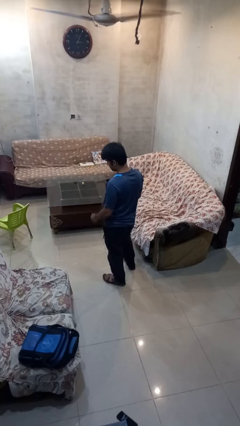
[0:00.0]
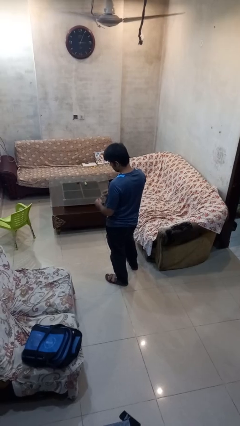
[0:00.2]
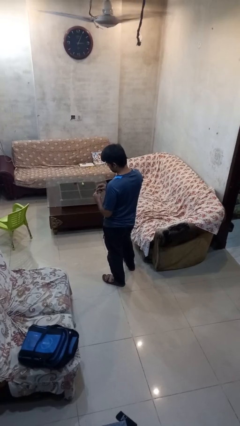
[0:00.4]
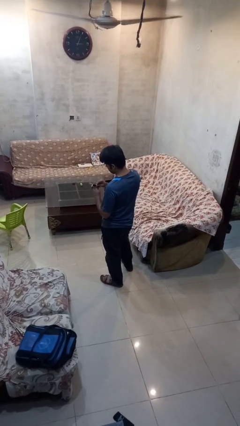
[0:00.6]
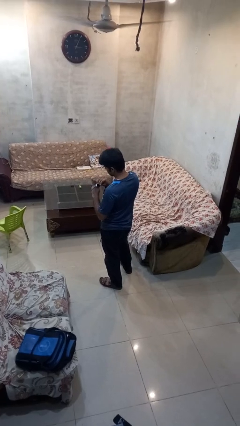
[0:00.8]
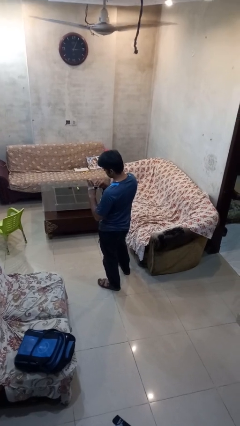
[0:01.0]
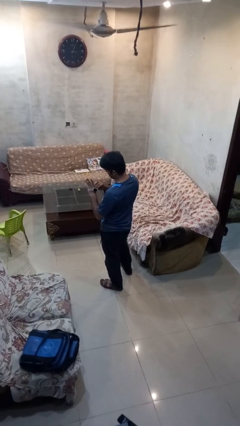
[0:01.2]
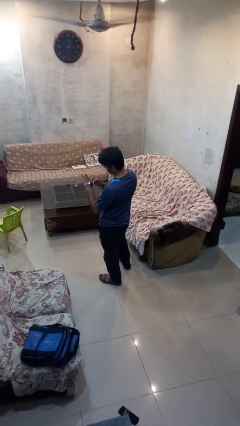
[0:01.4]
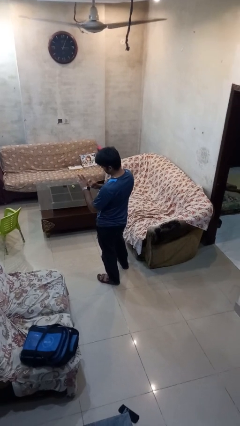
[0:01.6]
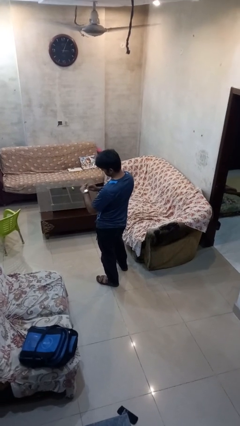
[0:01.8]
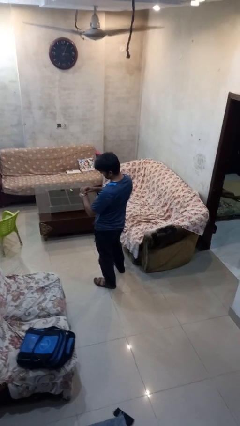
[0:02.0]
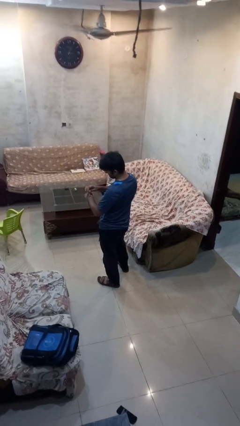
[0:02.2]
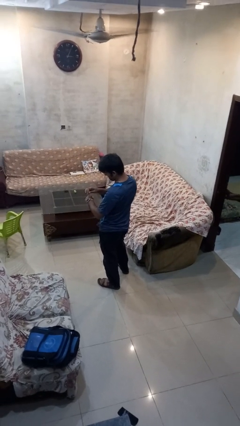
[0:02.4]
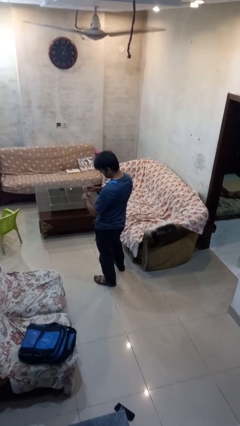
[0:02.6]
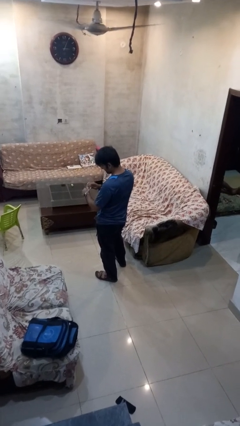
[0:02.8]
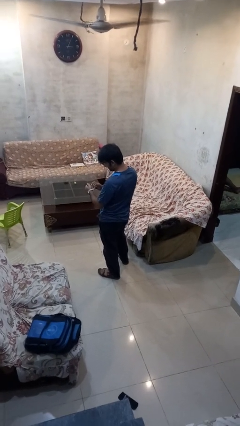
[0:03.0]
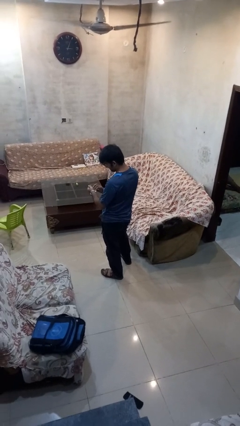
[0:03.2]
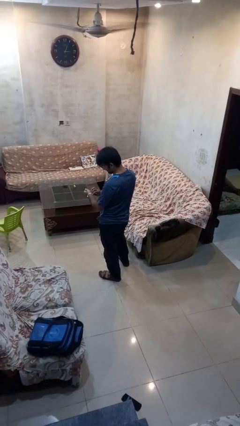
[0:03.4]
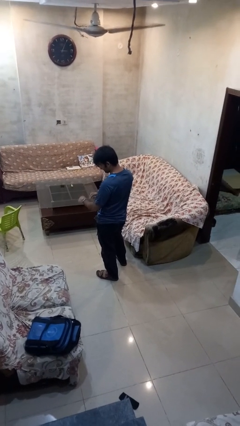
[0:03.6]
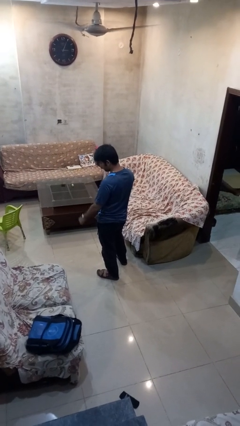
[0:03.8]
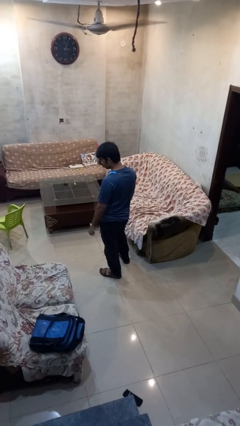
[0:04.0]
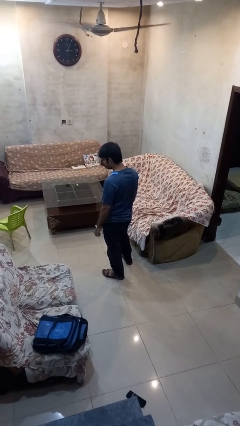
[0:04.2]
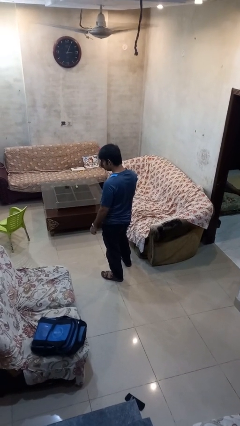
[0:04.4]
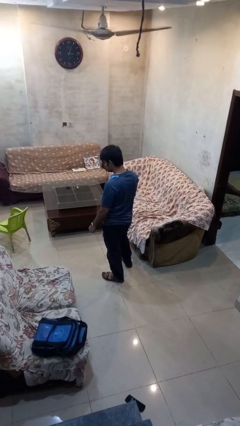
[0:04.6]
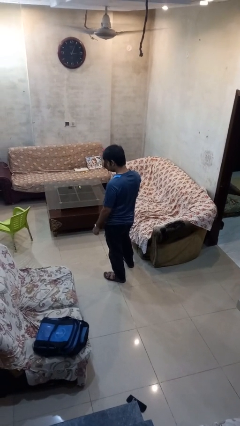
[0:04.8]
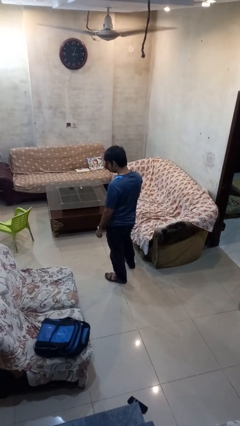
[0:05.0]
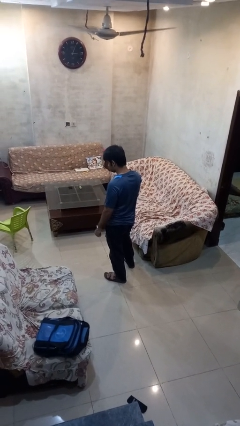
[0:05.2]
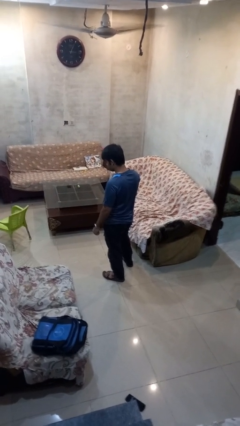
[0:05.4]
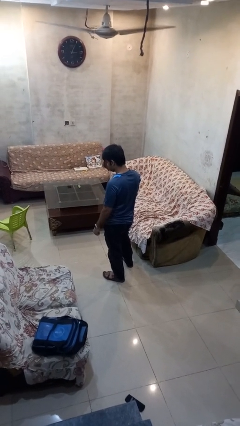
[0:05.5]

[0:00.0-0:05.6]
person puts on wristwatch

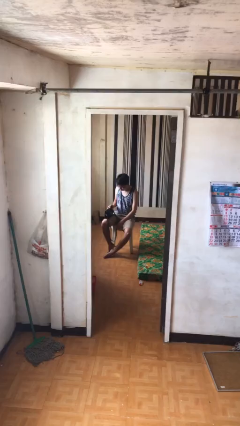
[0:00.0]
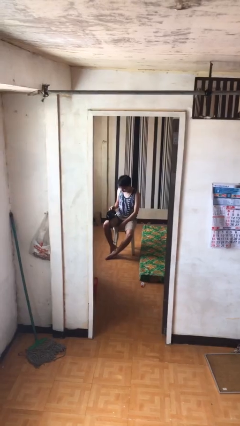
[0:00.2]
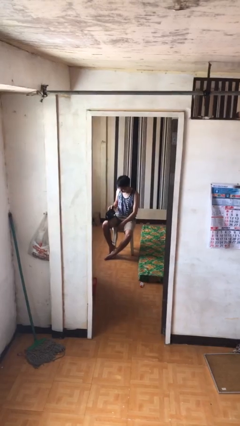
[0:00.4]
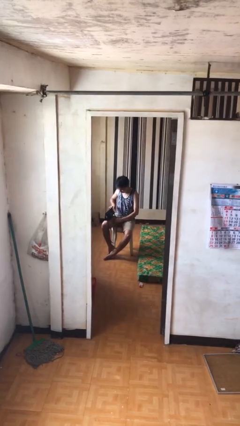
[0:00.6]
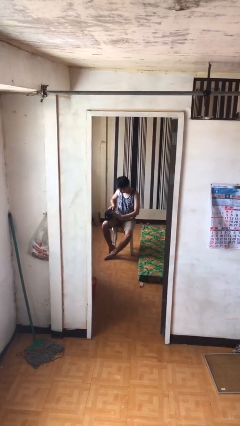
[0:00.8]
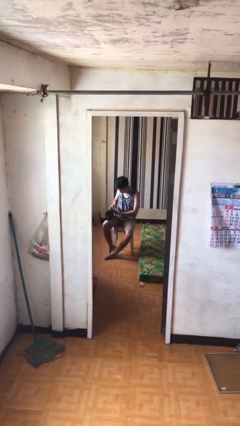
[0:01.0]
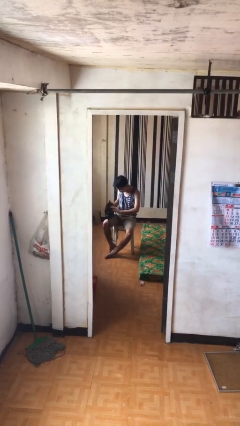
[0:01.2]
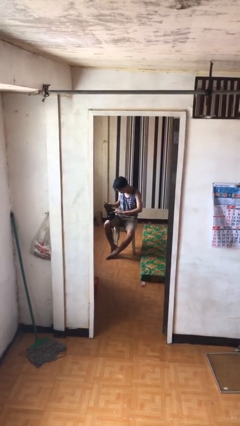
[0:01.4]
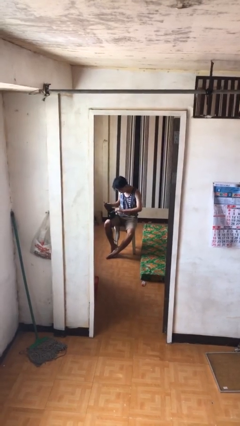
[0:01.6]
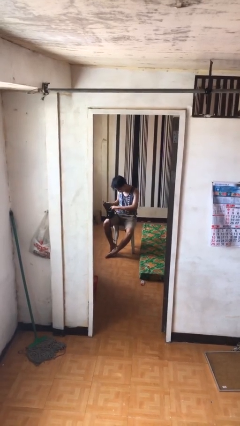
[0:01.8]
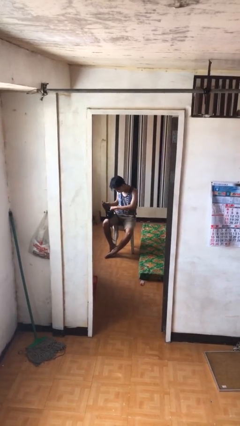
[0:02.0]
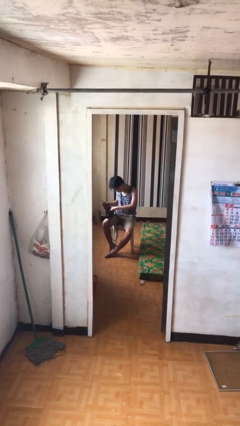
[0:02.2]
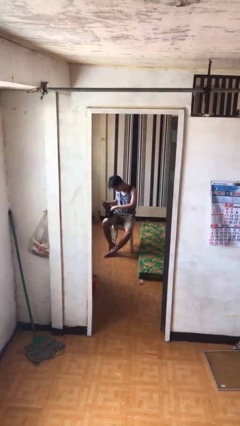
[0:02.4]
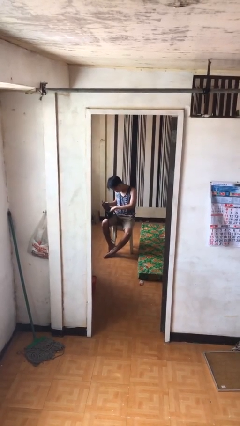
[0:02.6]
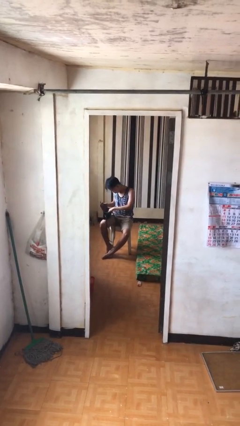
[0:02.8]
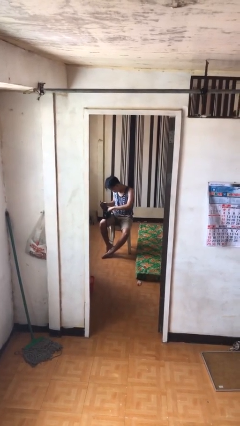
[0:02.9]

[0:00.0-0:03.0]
person searches in purse

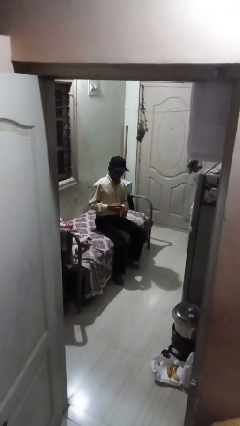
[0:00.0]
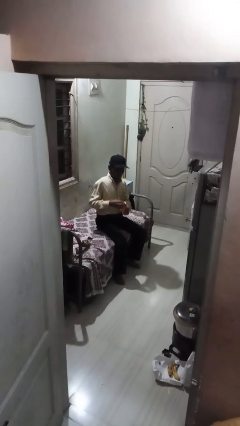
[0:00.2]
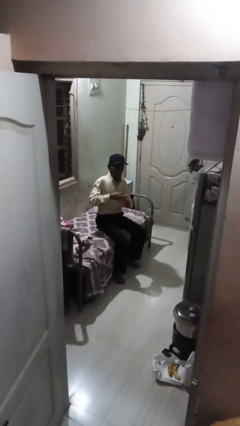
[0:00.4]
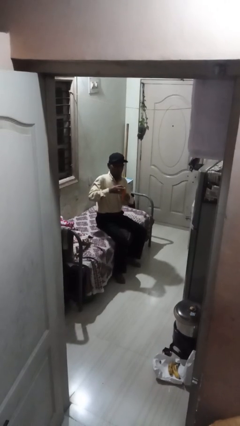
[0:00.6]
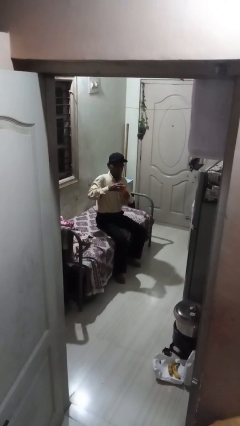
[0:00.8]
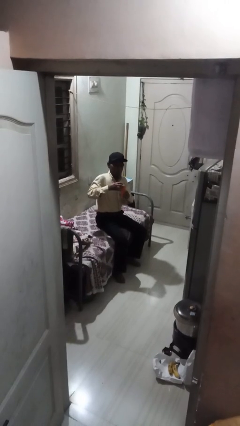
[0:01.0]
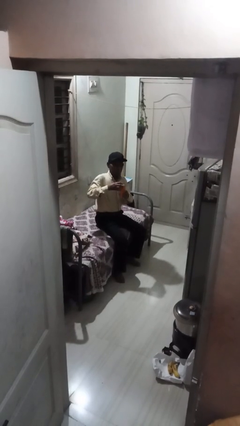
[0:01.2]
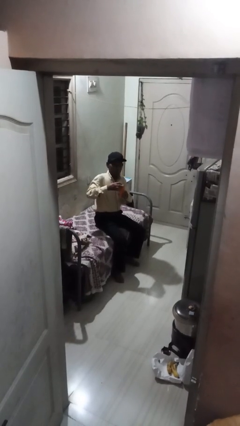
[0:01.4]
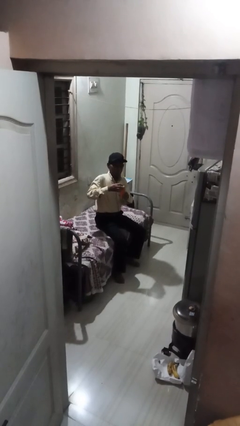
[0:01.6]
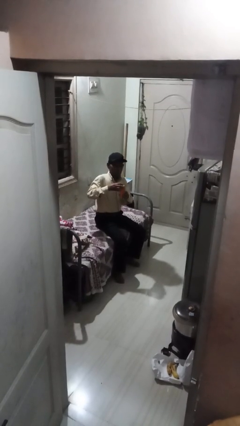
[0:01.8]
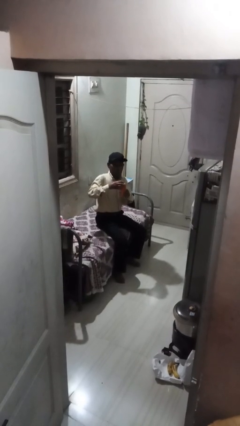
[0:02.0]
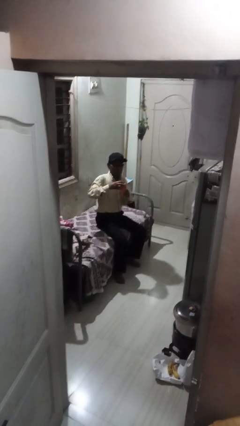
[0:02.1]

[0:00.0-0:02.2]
person opens beverage can

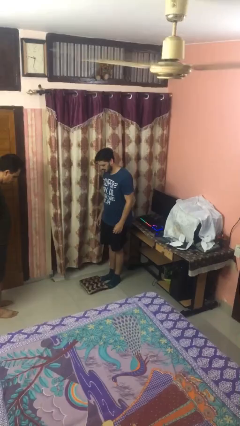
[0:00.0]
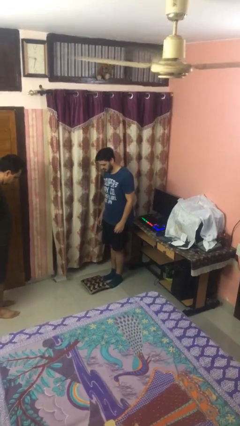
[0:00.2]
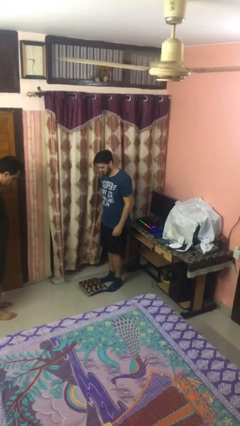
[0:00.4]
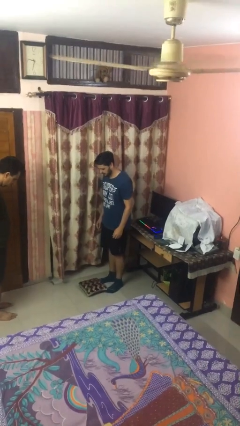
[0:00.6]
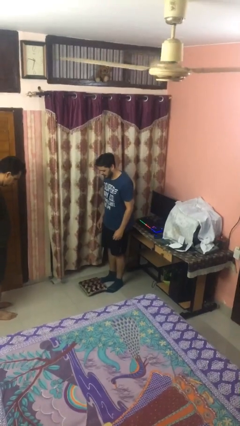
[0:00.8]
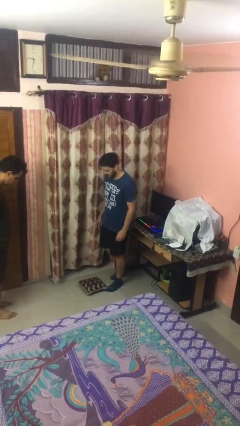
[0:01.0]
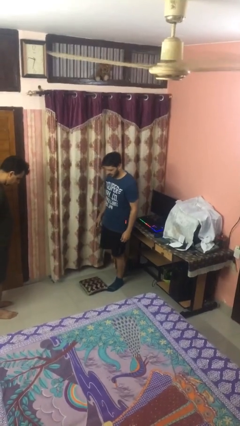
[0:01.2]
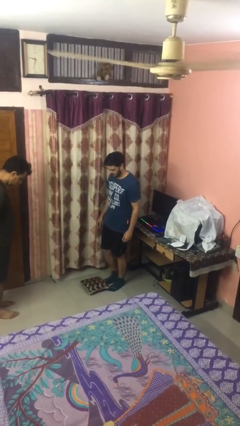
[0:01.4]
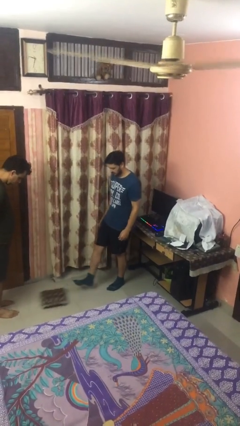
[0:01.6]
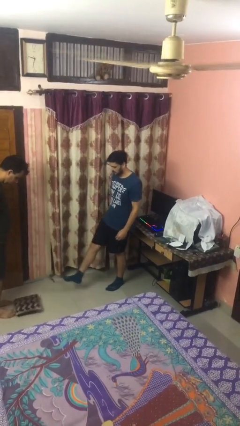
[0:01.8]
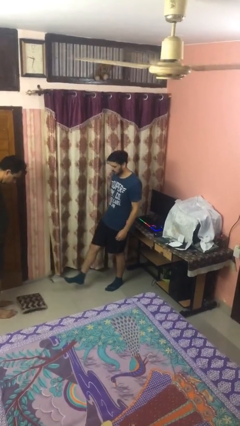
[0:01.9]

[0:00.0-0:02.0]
person kicks object to person

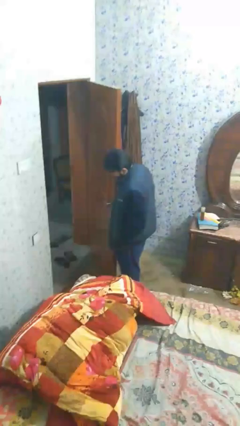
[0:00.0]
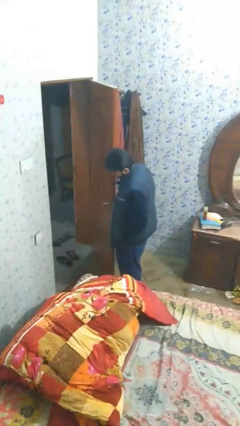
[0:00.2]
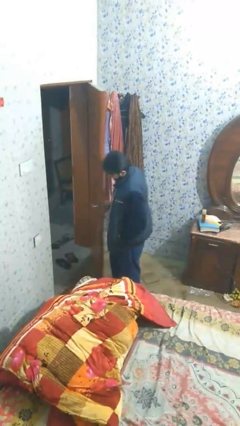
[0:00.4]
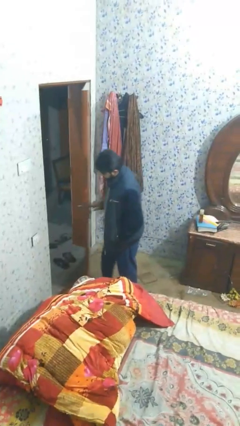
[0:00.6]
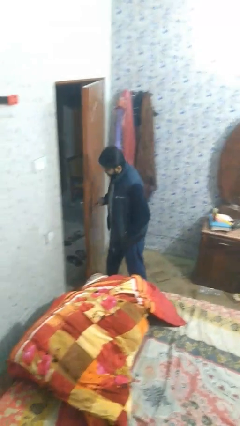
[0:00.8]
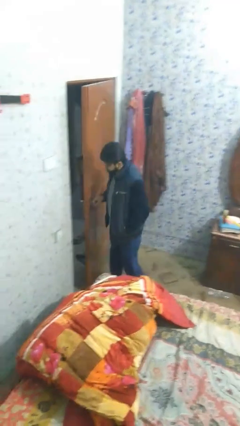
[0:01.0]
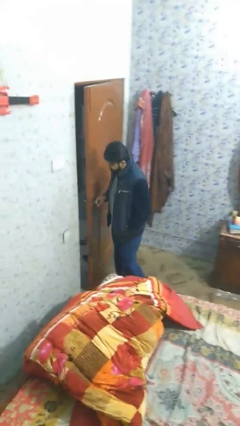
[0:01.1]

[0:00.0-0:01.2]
person opens facility door

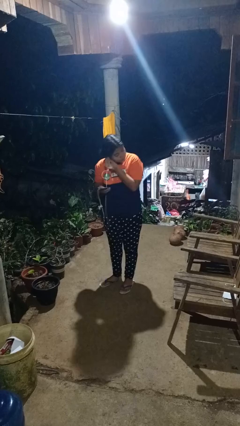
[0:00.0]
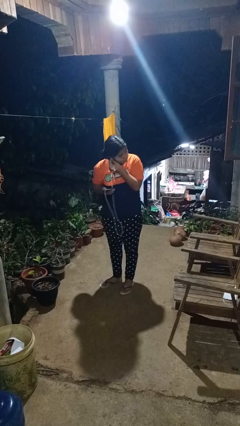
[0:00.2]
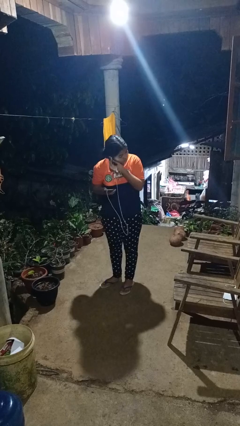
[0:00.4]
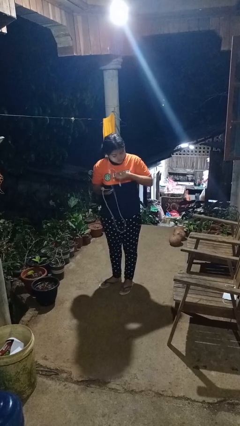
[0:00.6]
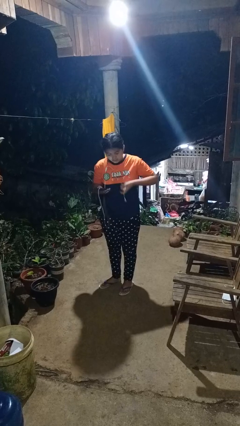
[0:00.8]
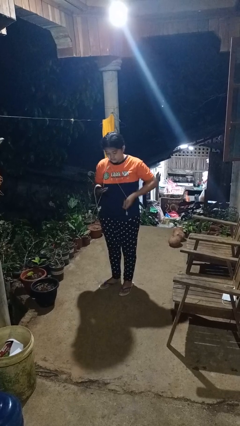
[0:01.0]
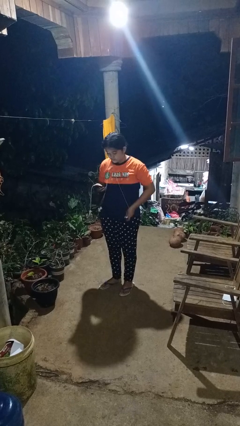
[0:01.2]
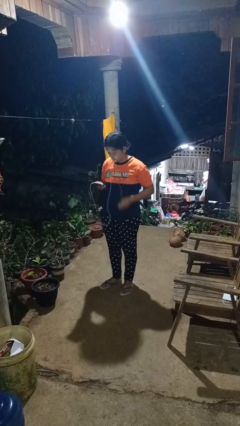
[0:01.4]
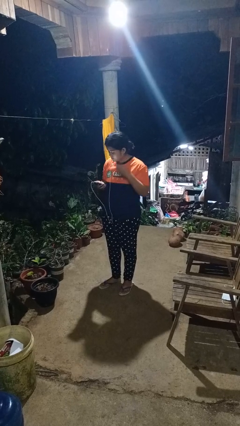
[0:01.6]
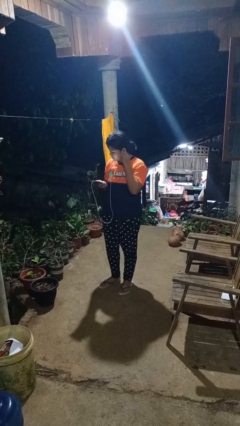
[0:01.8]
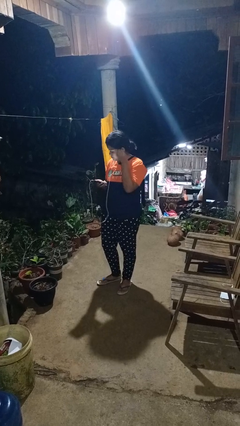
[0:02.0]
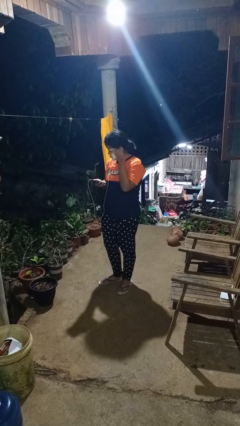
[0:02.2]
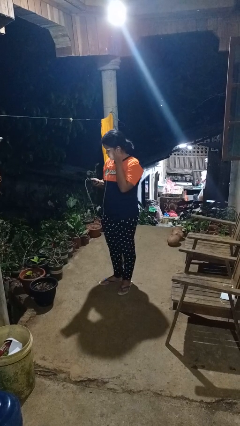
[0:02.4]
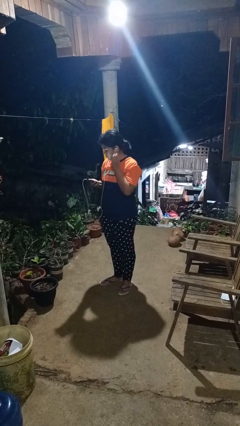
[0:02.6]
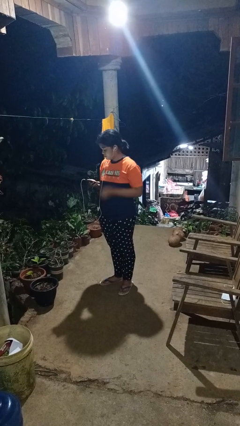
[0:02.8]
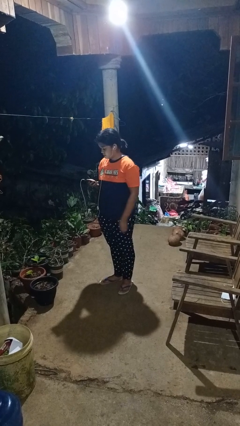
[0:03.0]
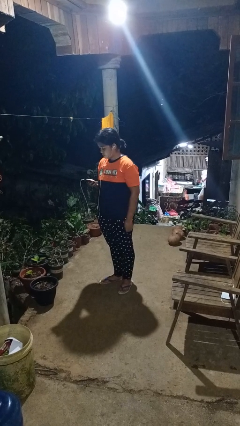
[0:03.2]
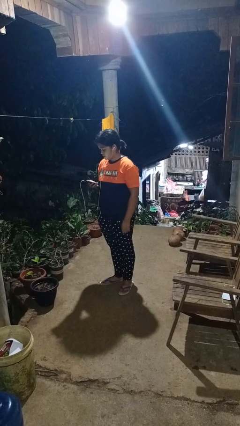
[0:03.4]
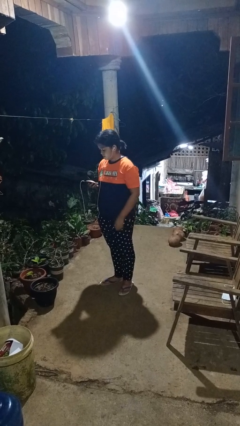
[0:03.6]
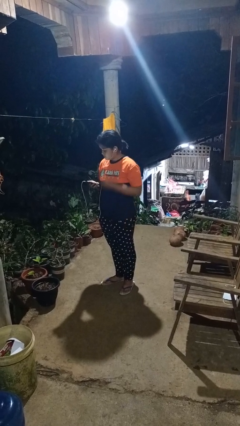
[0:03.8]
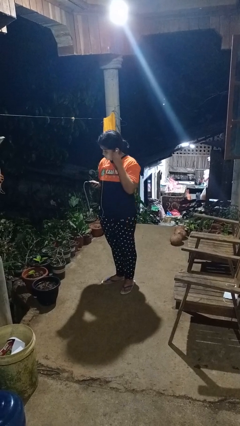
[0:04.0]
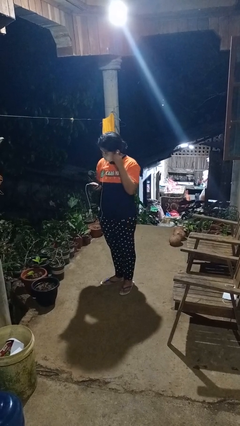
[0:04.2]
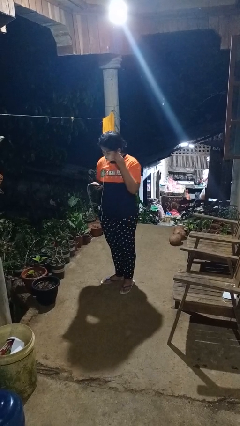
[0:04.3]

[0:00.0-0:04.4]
person puts on headphones
